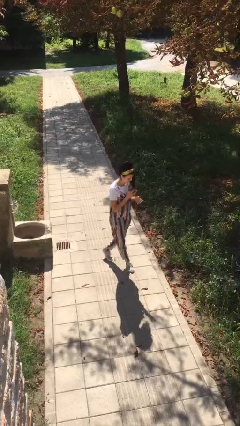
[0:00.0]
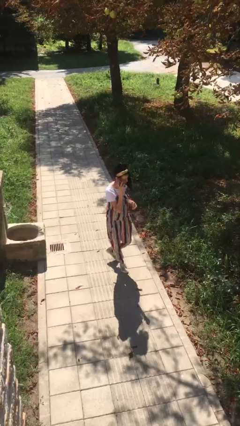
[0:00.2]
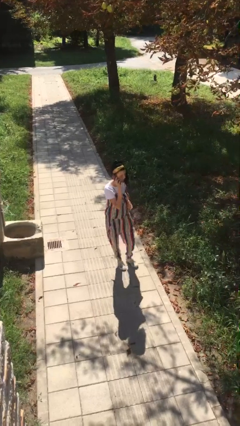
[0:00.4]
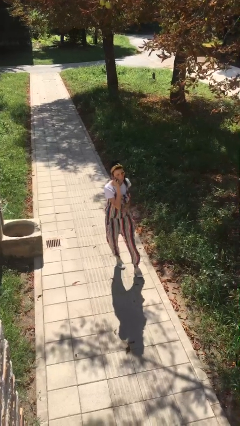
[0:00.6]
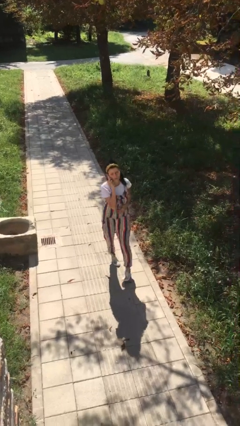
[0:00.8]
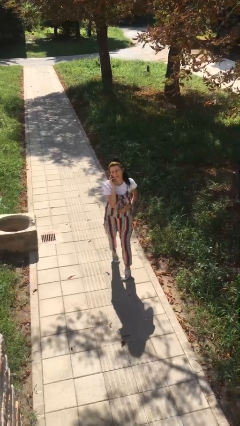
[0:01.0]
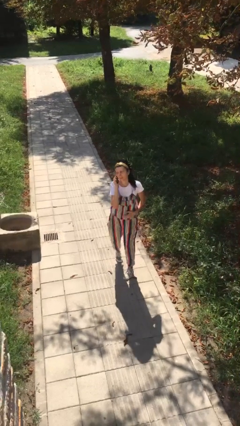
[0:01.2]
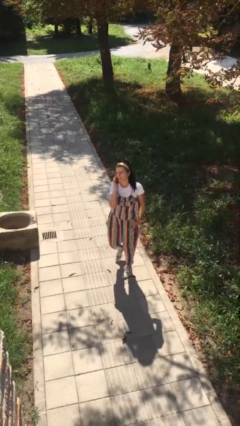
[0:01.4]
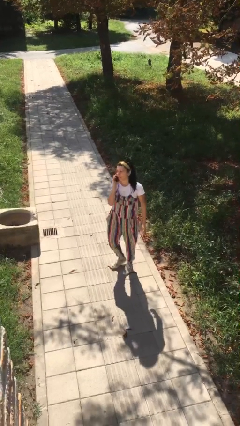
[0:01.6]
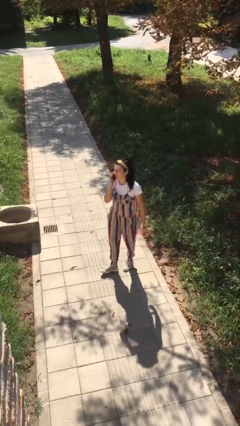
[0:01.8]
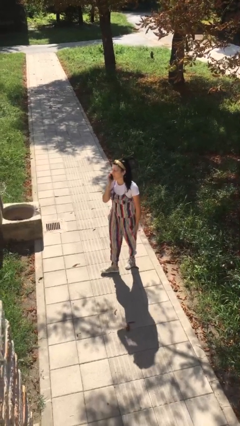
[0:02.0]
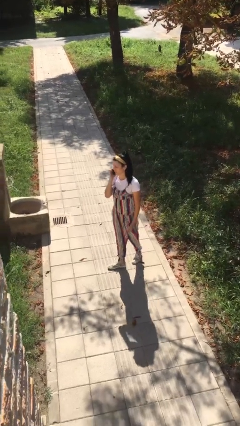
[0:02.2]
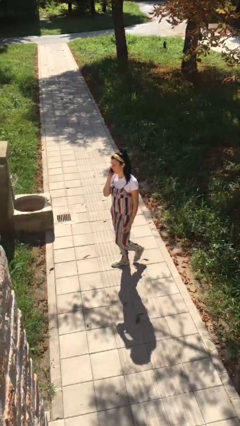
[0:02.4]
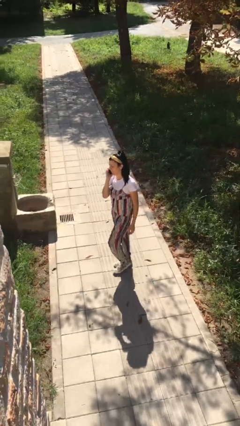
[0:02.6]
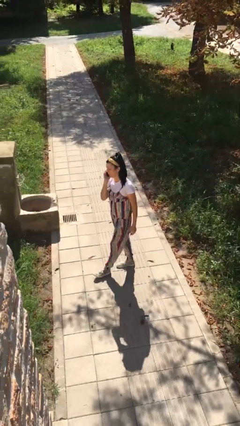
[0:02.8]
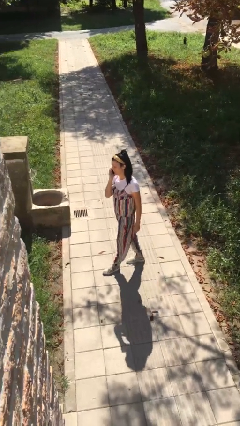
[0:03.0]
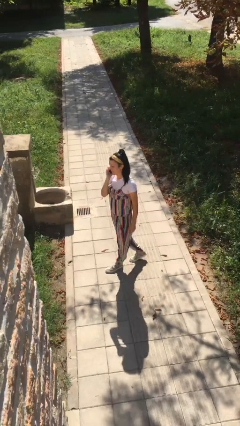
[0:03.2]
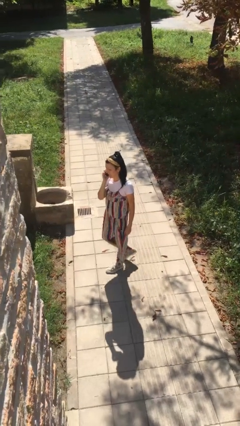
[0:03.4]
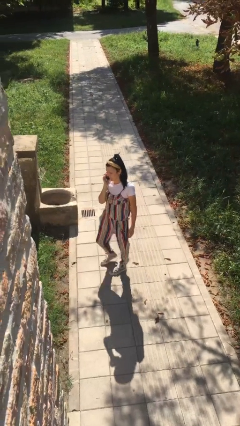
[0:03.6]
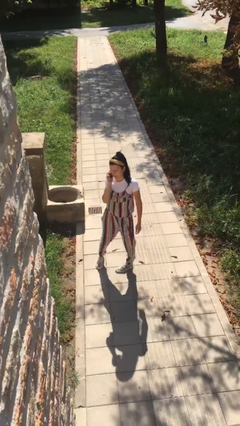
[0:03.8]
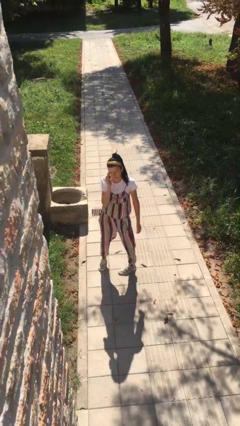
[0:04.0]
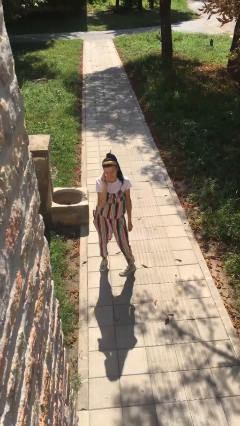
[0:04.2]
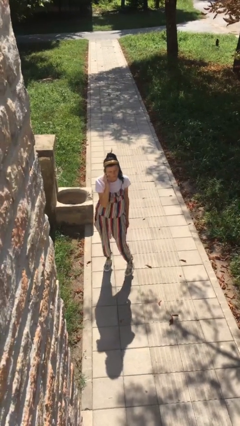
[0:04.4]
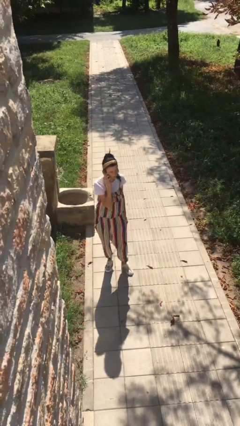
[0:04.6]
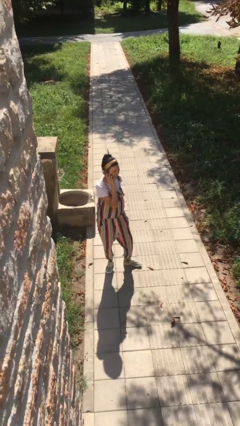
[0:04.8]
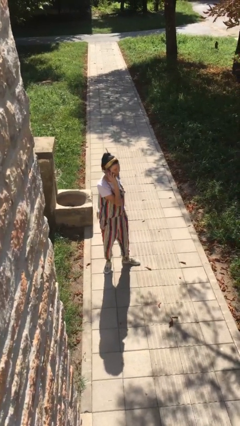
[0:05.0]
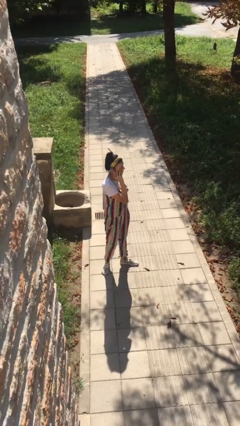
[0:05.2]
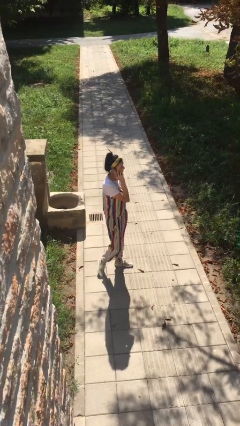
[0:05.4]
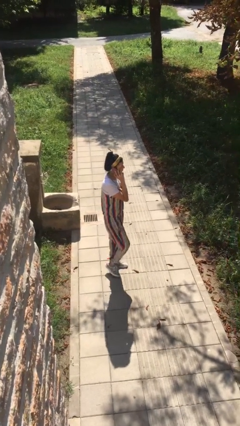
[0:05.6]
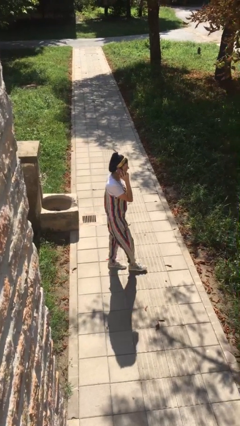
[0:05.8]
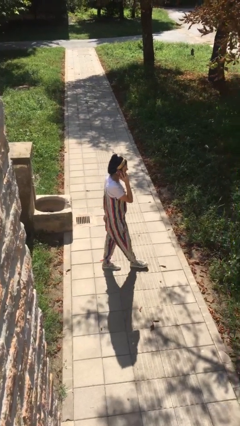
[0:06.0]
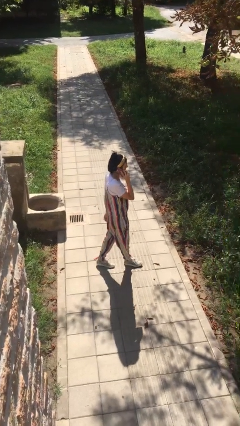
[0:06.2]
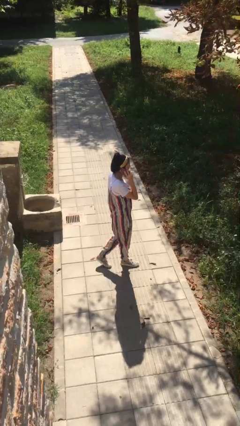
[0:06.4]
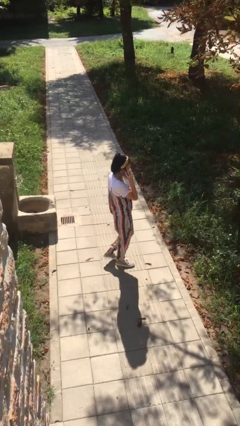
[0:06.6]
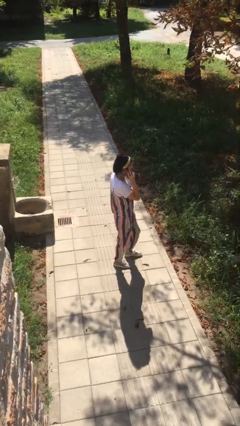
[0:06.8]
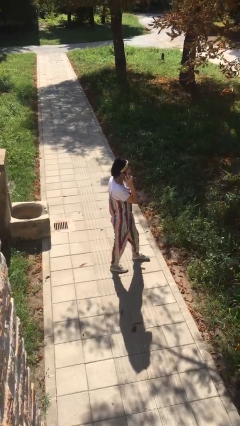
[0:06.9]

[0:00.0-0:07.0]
person talks on phone

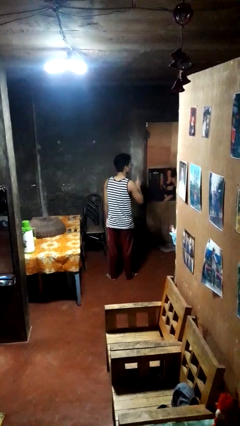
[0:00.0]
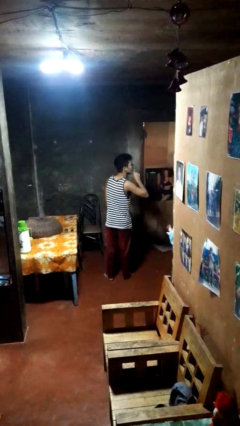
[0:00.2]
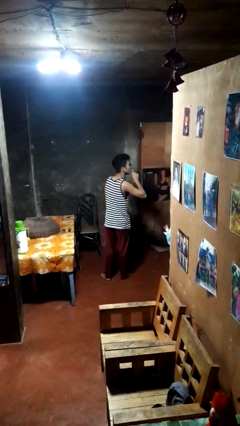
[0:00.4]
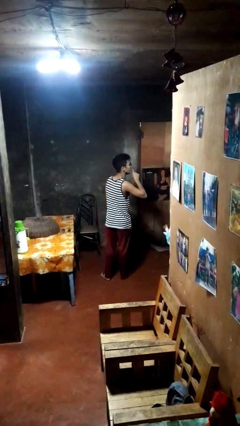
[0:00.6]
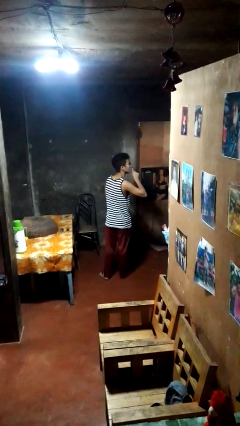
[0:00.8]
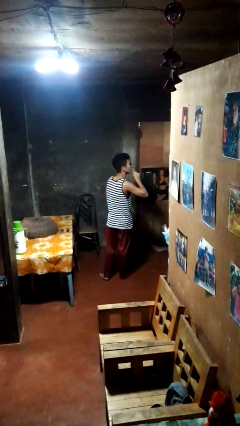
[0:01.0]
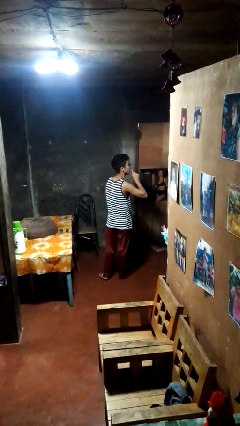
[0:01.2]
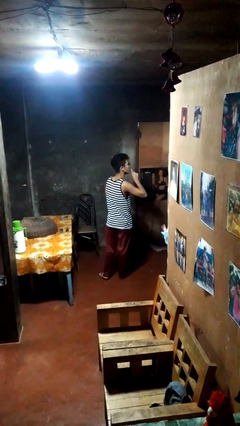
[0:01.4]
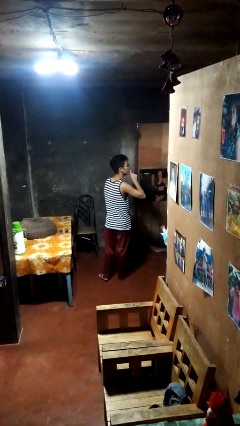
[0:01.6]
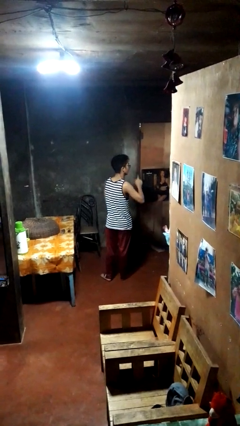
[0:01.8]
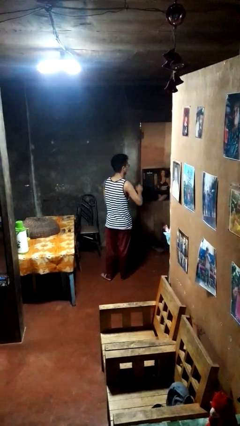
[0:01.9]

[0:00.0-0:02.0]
person gestures be quiet

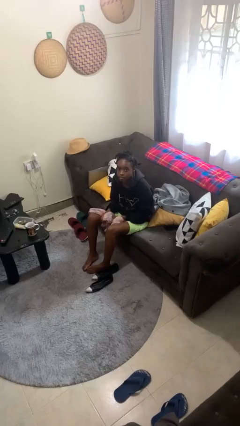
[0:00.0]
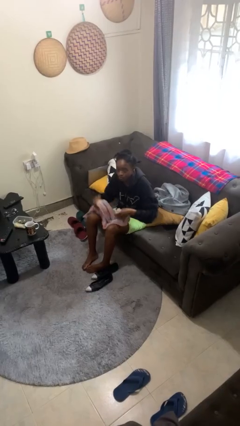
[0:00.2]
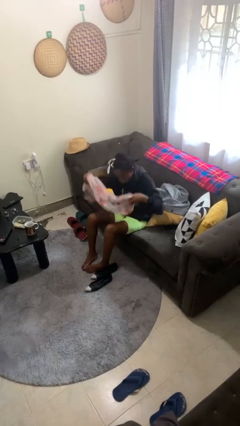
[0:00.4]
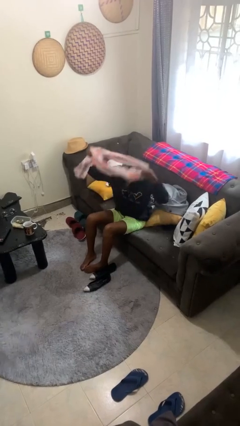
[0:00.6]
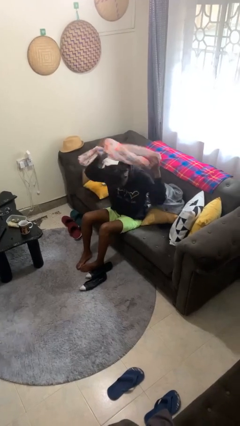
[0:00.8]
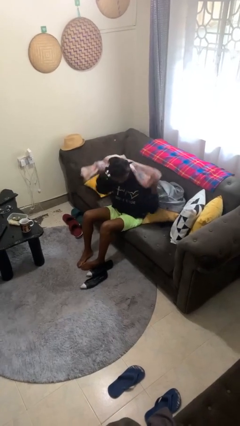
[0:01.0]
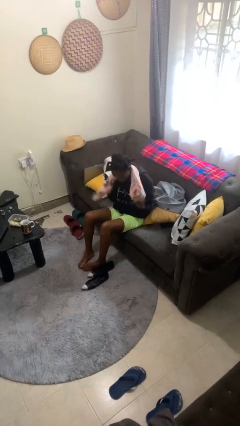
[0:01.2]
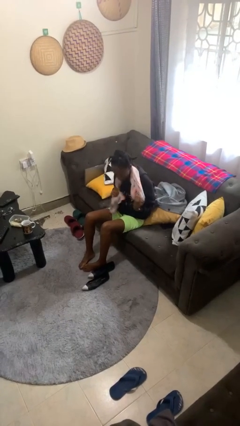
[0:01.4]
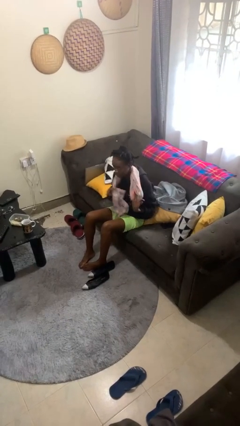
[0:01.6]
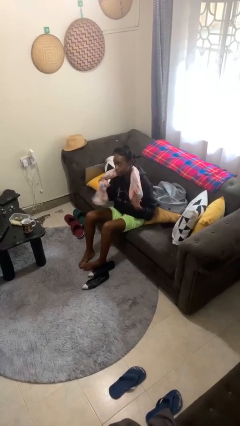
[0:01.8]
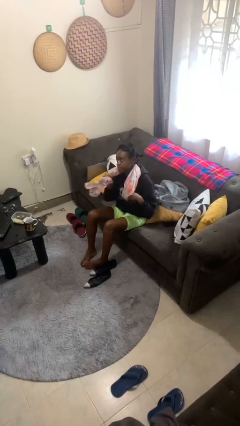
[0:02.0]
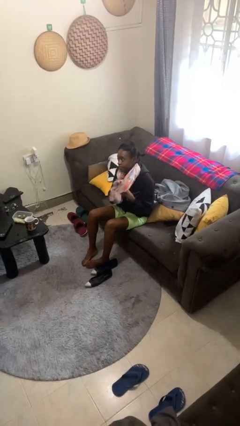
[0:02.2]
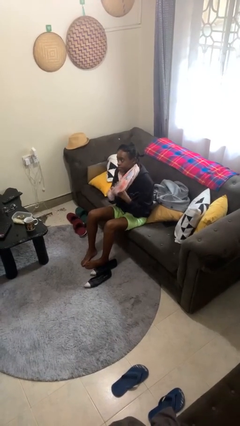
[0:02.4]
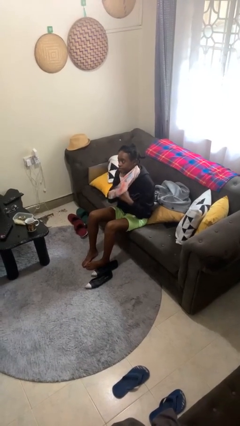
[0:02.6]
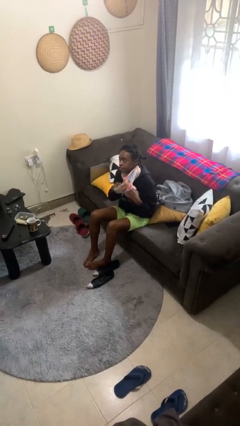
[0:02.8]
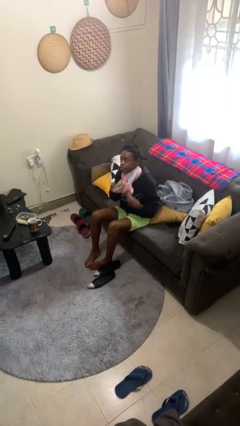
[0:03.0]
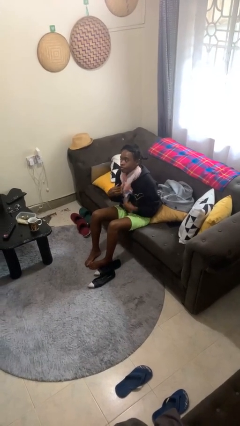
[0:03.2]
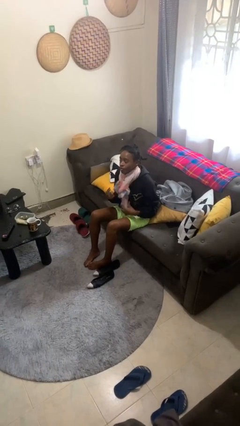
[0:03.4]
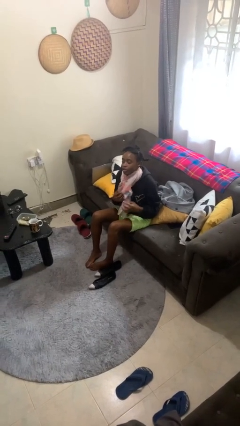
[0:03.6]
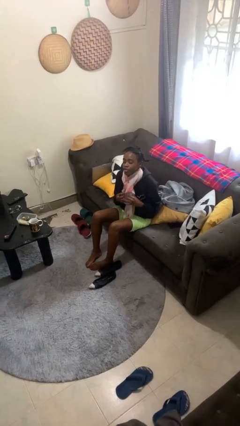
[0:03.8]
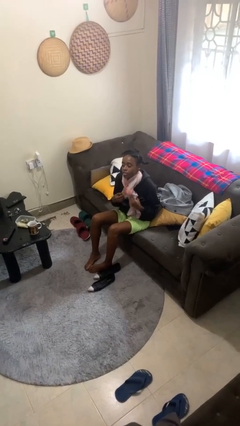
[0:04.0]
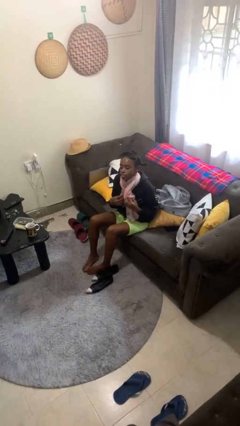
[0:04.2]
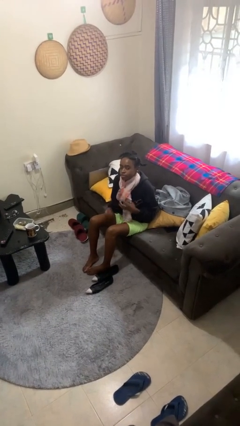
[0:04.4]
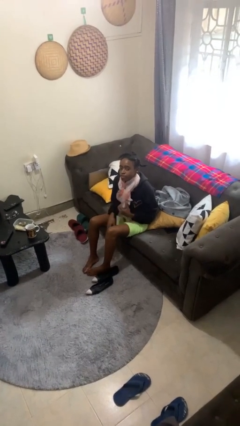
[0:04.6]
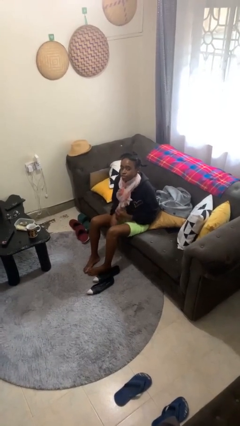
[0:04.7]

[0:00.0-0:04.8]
person puts on scarf

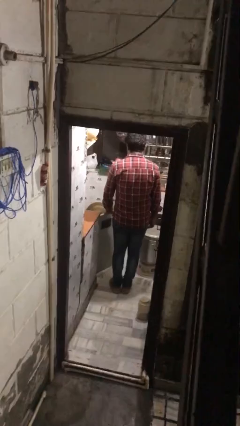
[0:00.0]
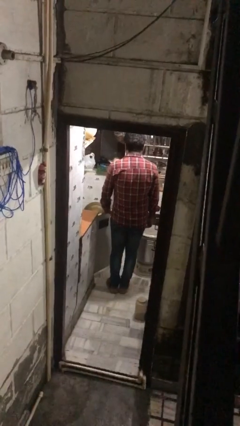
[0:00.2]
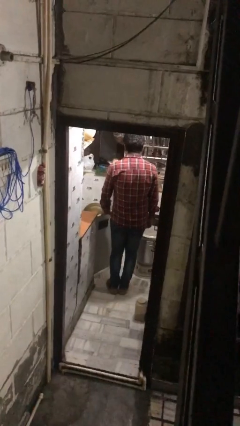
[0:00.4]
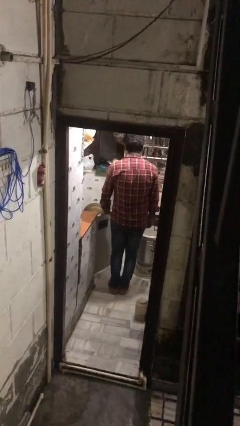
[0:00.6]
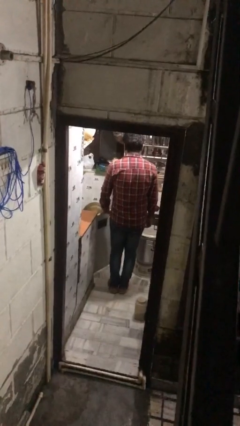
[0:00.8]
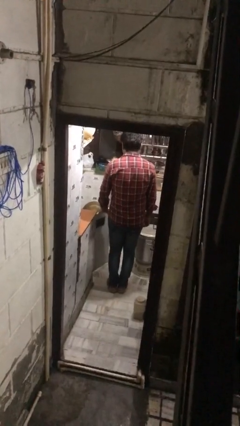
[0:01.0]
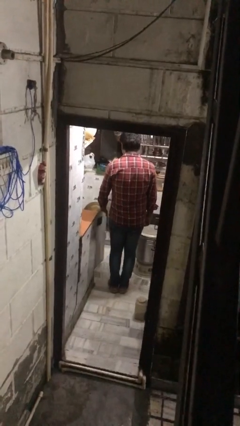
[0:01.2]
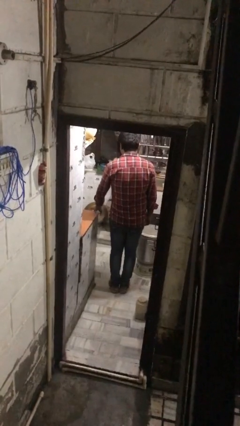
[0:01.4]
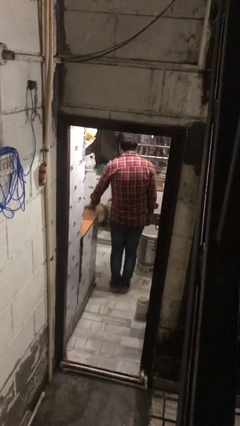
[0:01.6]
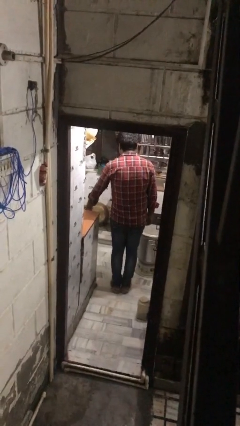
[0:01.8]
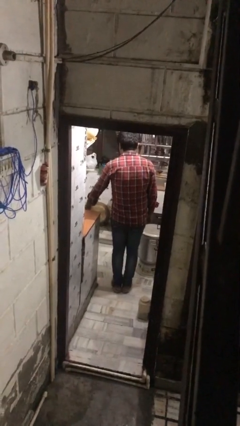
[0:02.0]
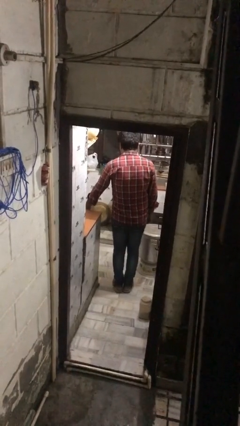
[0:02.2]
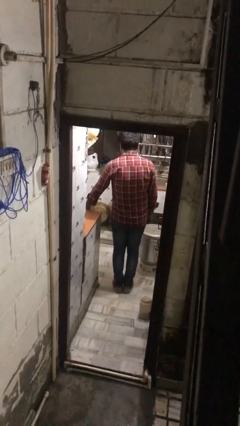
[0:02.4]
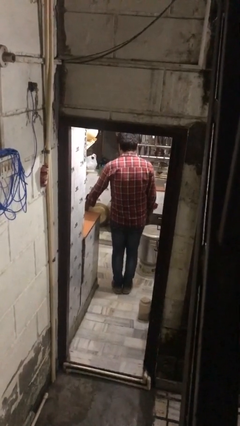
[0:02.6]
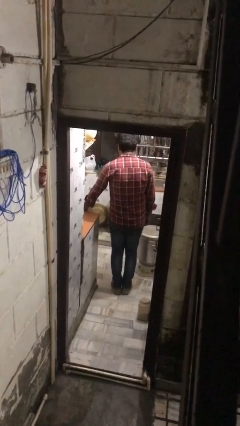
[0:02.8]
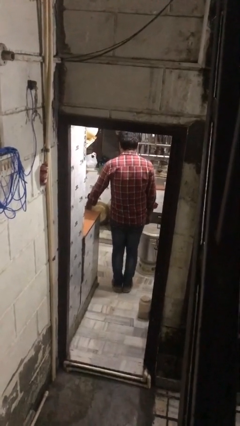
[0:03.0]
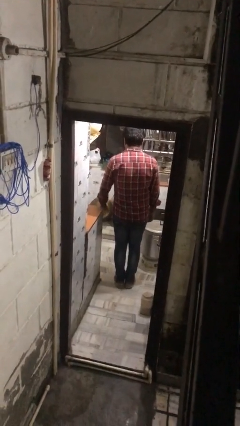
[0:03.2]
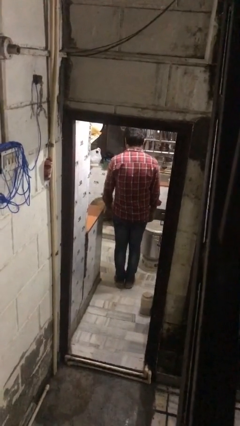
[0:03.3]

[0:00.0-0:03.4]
person closes kitchen drawer

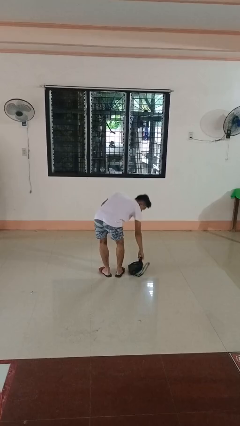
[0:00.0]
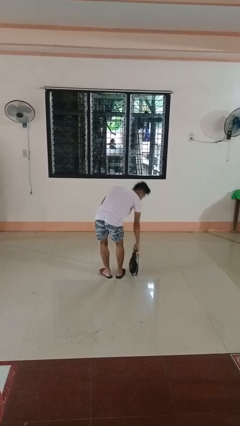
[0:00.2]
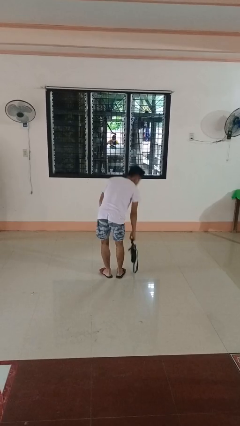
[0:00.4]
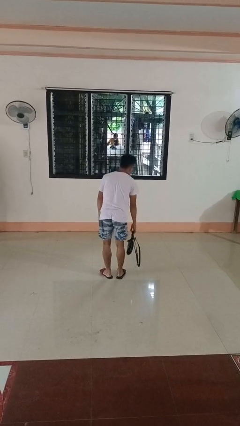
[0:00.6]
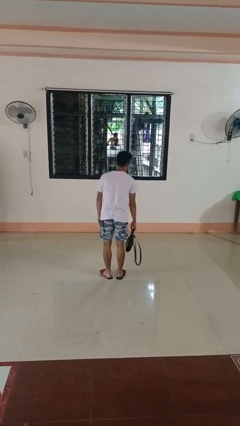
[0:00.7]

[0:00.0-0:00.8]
person picks up object from floor
